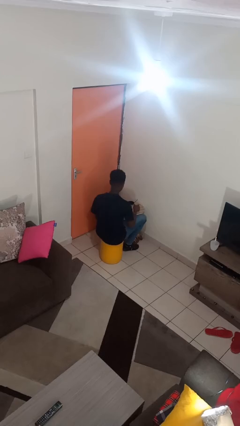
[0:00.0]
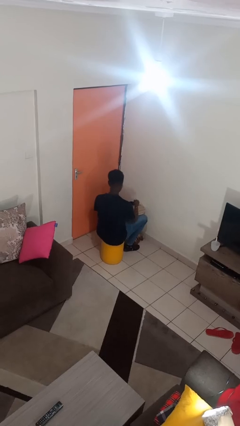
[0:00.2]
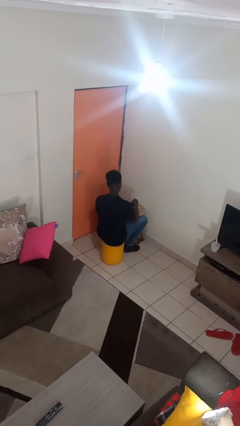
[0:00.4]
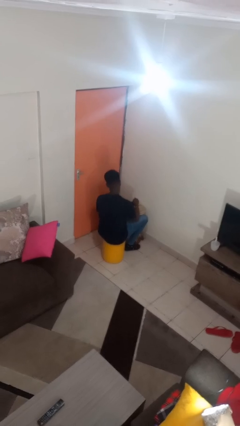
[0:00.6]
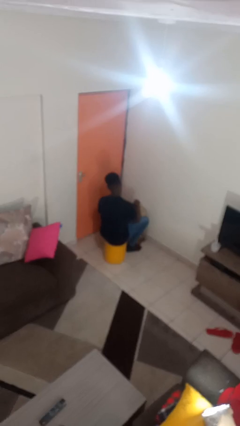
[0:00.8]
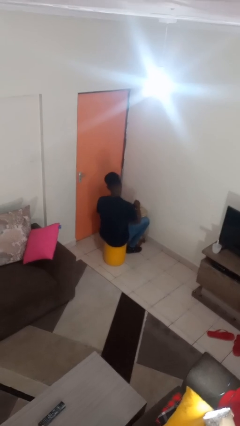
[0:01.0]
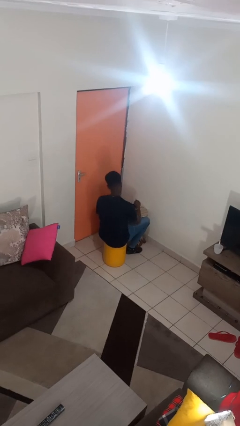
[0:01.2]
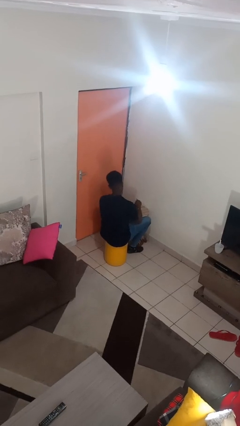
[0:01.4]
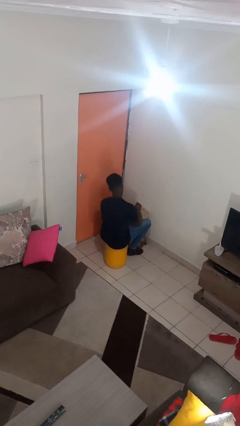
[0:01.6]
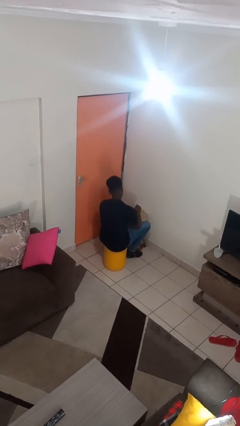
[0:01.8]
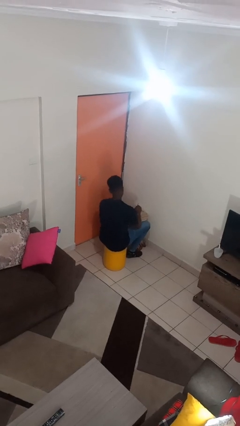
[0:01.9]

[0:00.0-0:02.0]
person stirs mug

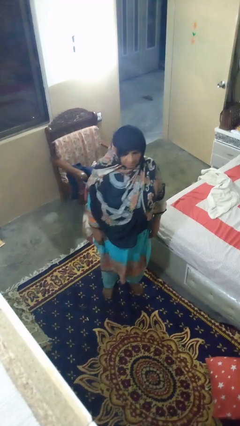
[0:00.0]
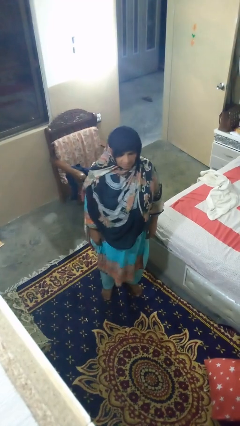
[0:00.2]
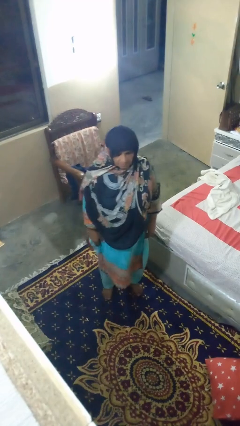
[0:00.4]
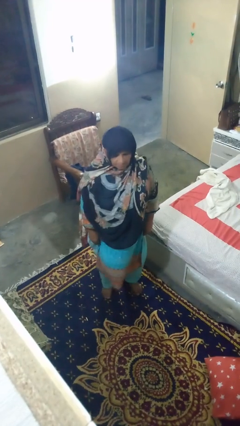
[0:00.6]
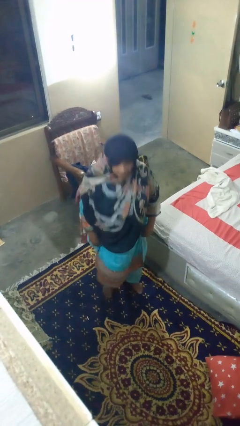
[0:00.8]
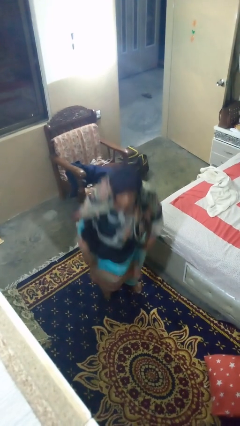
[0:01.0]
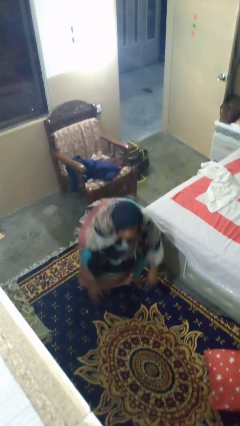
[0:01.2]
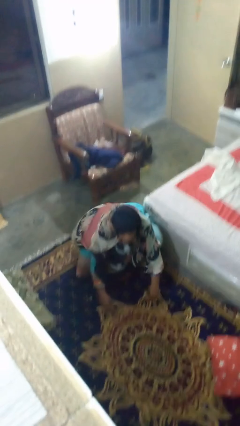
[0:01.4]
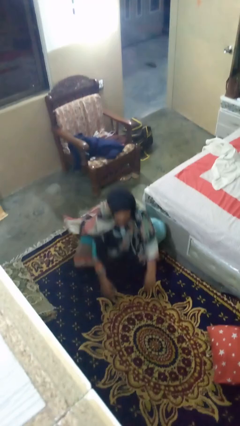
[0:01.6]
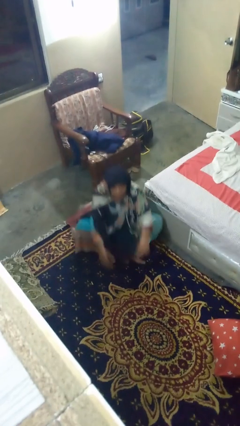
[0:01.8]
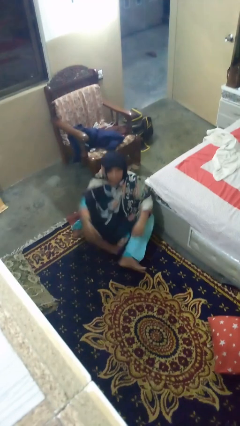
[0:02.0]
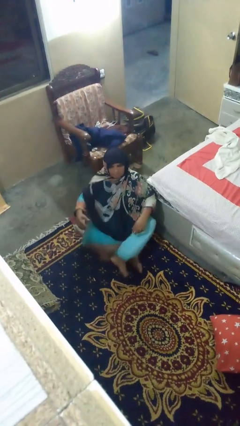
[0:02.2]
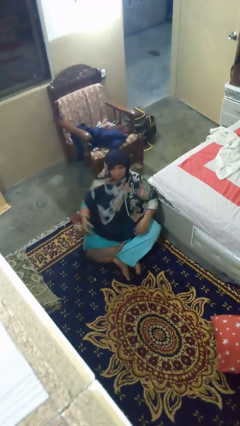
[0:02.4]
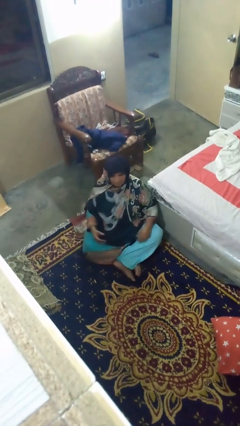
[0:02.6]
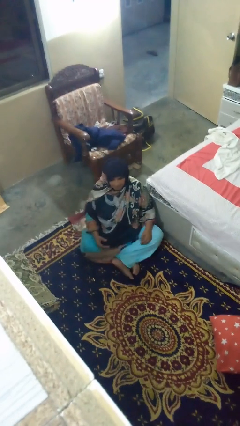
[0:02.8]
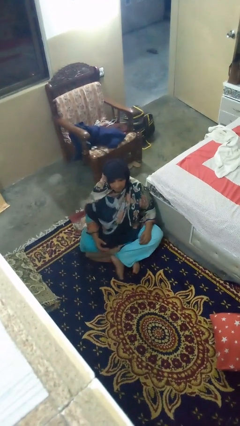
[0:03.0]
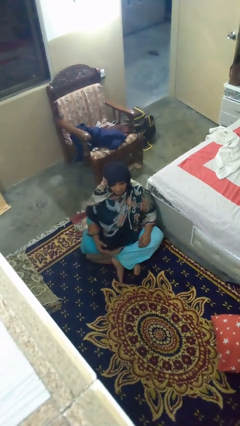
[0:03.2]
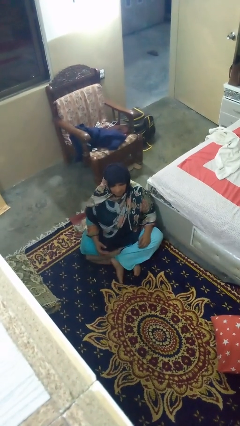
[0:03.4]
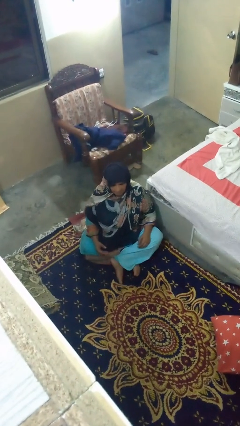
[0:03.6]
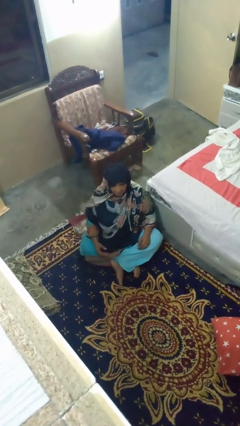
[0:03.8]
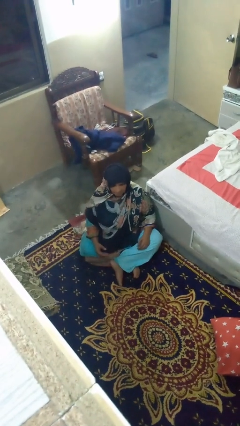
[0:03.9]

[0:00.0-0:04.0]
person sits crisscross

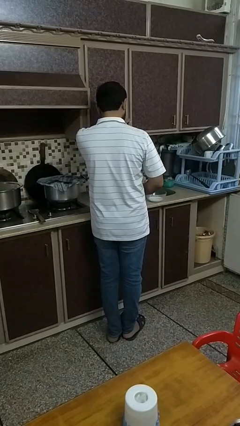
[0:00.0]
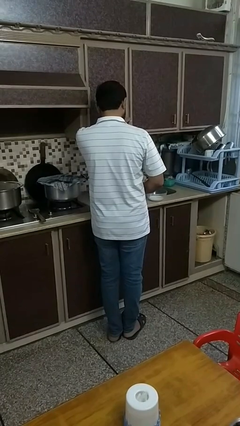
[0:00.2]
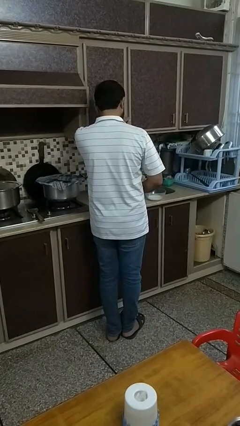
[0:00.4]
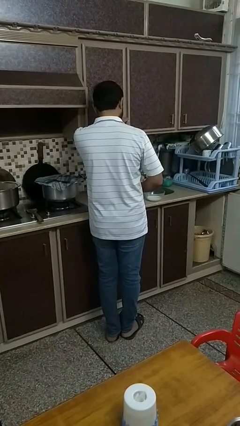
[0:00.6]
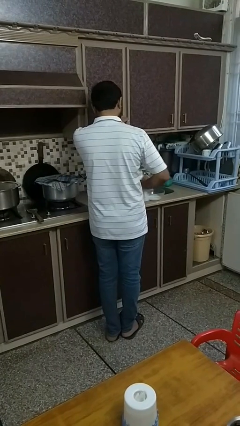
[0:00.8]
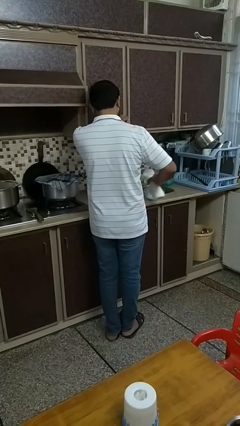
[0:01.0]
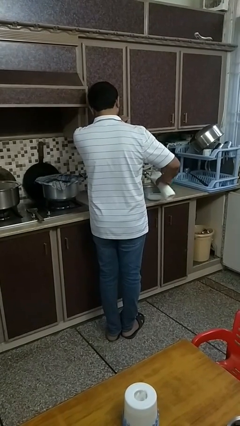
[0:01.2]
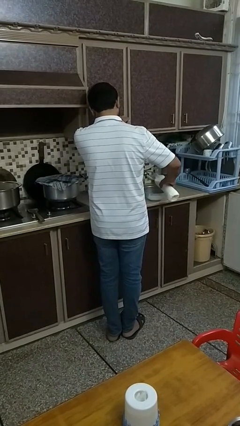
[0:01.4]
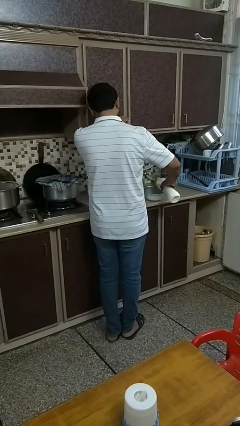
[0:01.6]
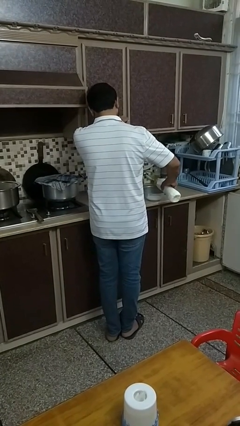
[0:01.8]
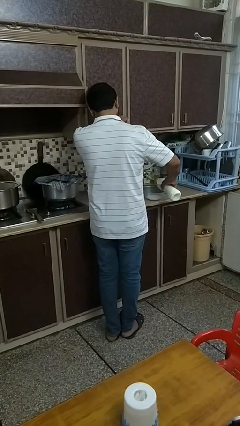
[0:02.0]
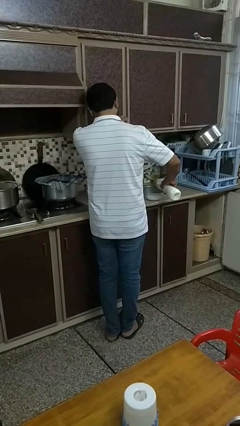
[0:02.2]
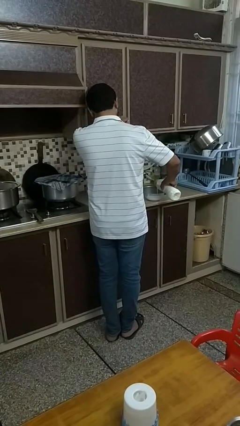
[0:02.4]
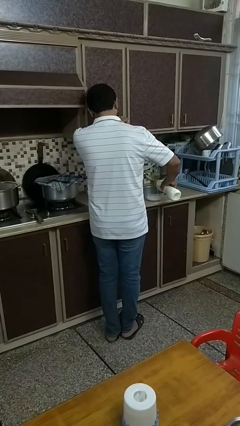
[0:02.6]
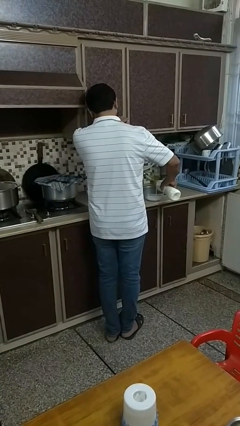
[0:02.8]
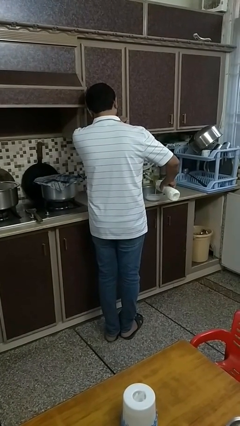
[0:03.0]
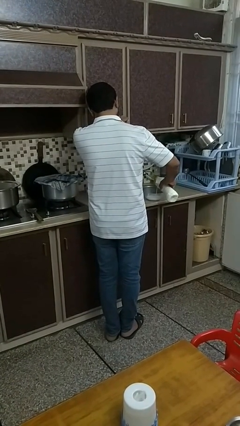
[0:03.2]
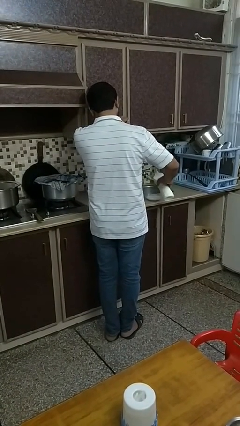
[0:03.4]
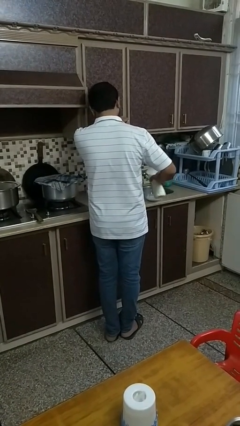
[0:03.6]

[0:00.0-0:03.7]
person pours into bowl

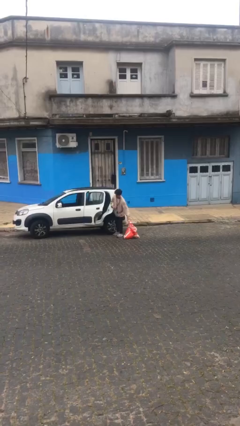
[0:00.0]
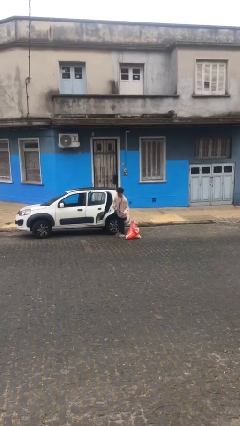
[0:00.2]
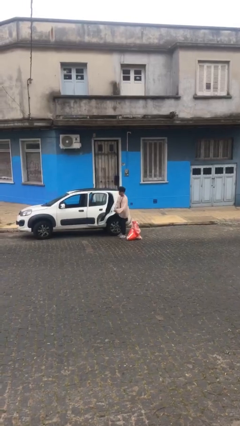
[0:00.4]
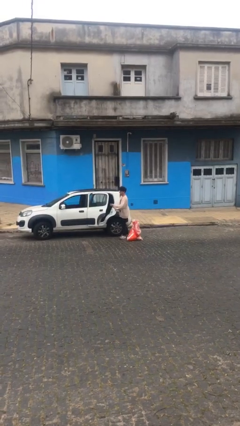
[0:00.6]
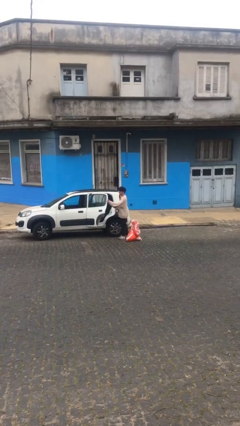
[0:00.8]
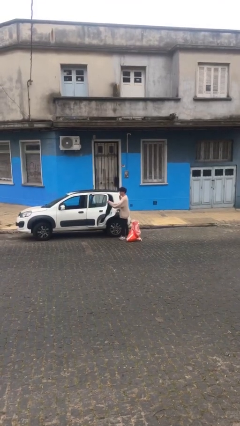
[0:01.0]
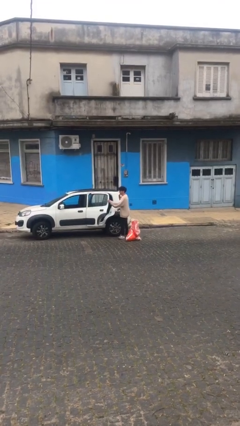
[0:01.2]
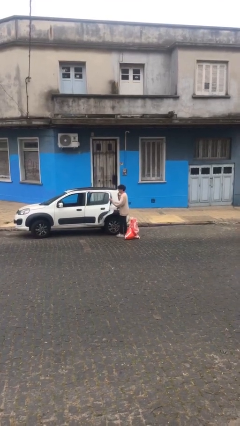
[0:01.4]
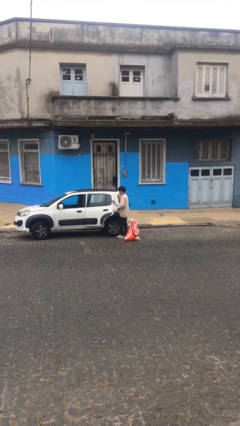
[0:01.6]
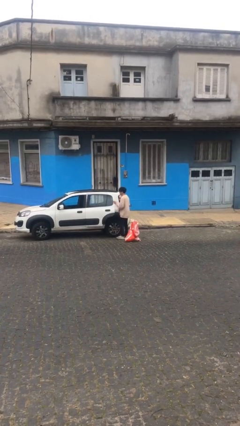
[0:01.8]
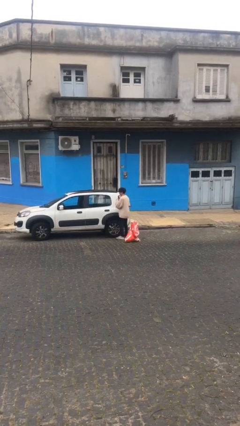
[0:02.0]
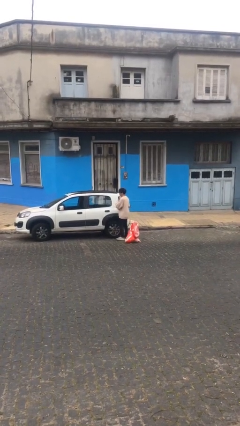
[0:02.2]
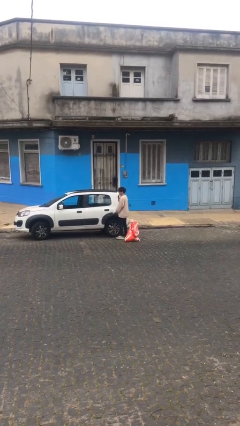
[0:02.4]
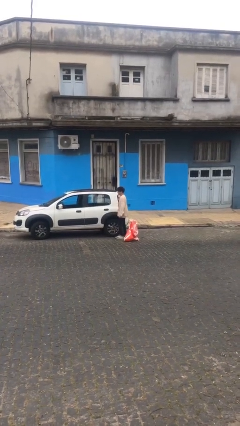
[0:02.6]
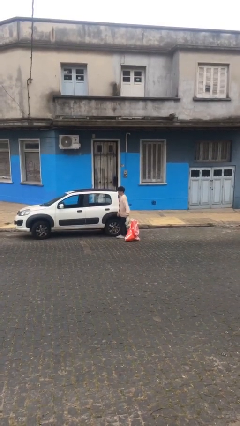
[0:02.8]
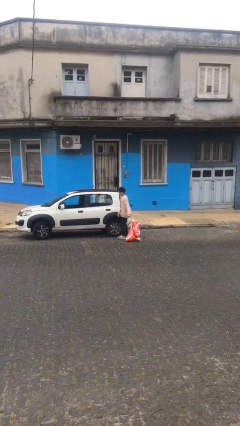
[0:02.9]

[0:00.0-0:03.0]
person closes car door

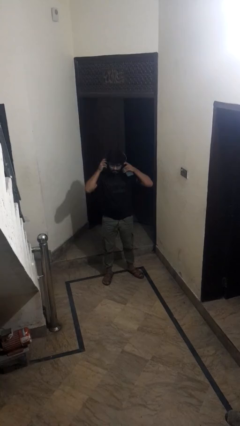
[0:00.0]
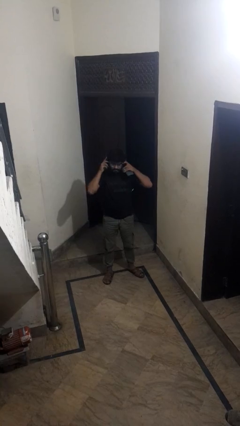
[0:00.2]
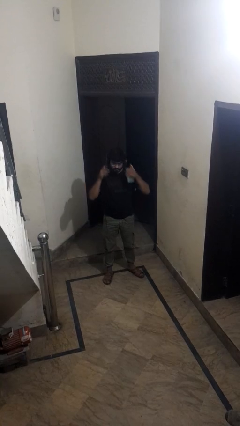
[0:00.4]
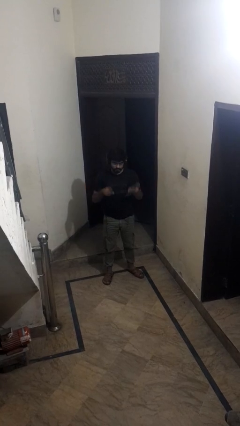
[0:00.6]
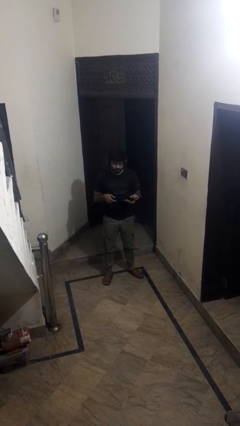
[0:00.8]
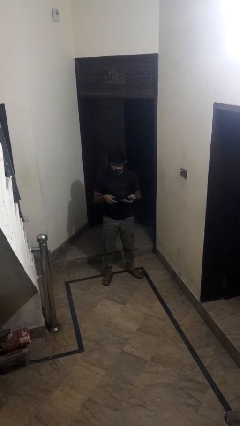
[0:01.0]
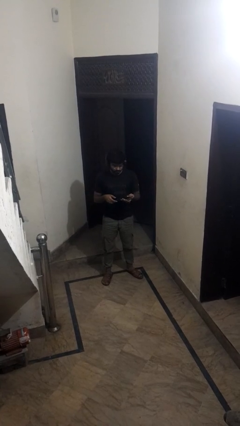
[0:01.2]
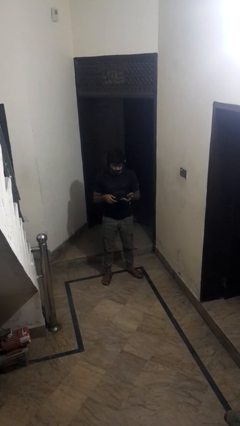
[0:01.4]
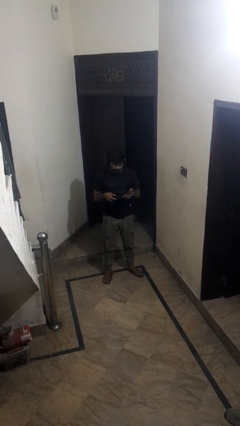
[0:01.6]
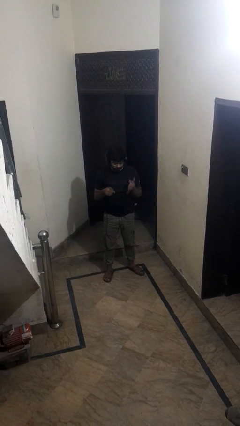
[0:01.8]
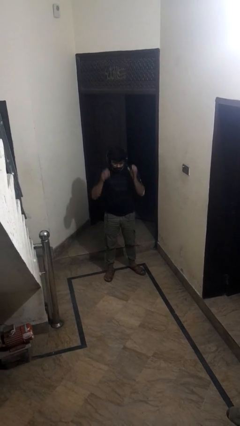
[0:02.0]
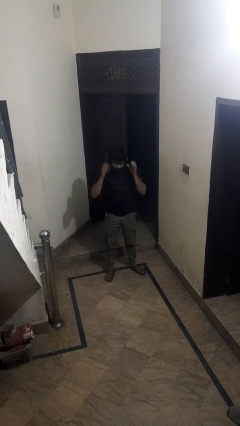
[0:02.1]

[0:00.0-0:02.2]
person puts on headphones

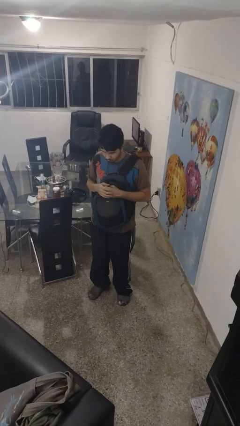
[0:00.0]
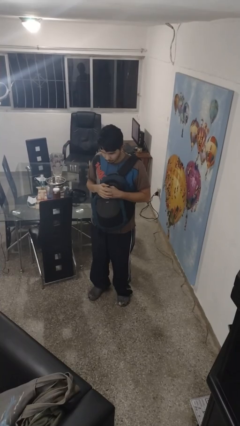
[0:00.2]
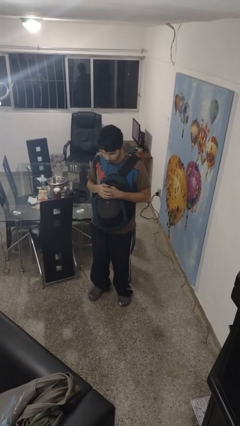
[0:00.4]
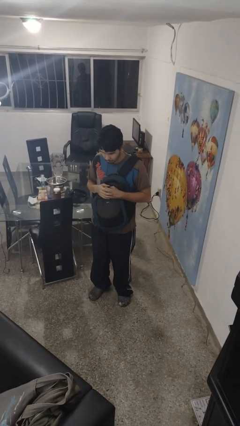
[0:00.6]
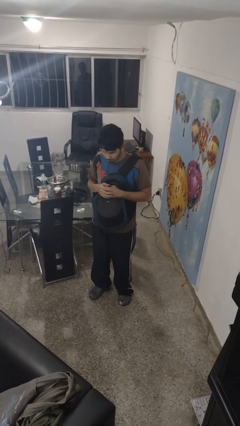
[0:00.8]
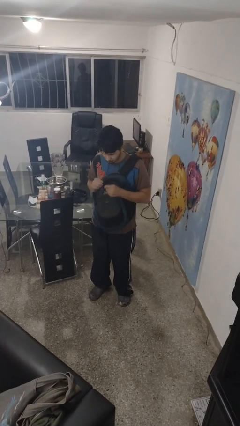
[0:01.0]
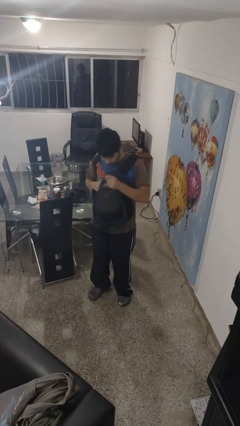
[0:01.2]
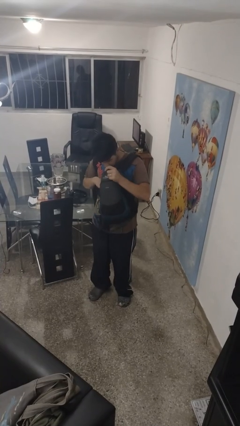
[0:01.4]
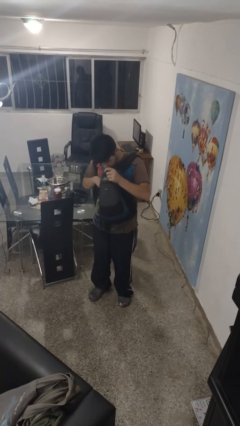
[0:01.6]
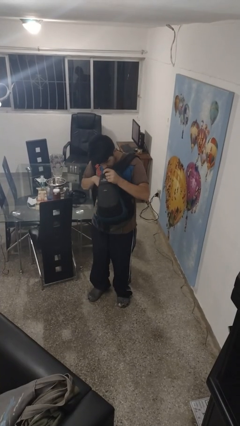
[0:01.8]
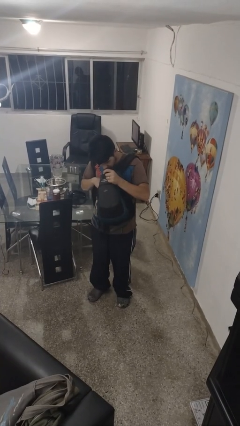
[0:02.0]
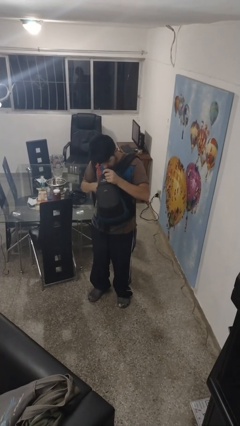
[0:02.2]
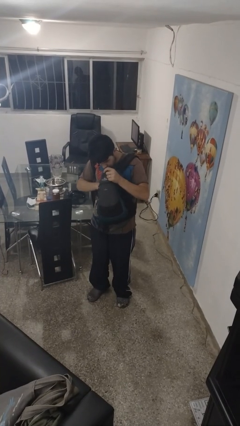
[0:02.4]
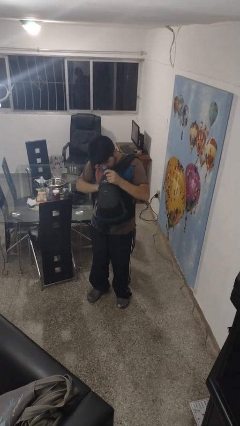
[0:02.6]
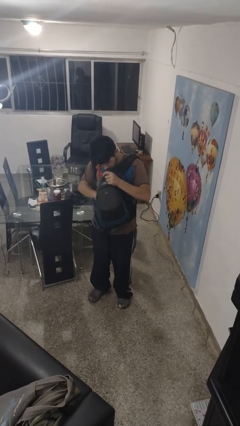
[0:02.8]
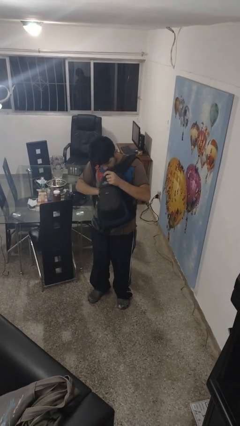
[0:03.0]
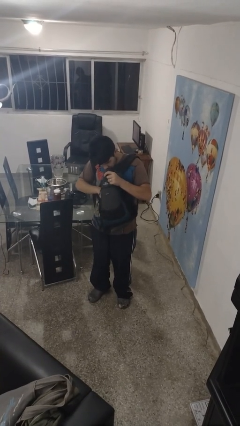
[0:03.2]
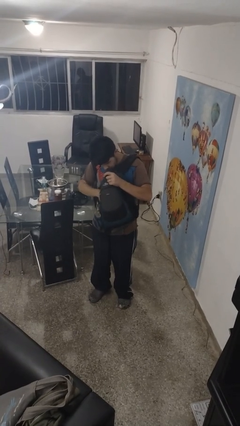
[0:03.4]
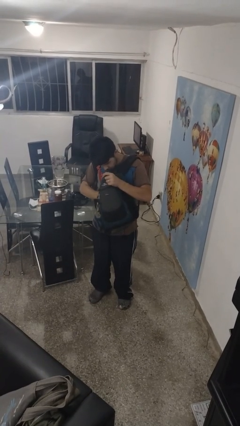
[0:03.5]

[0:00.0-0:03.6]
person searches in backpack
